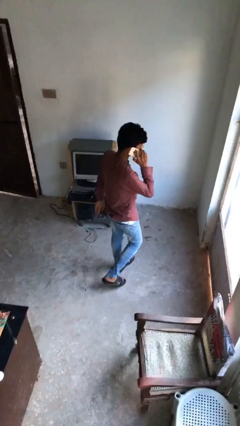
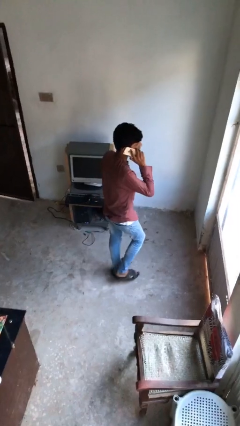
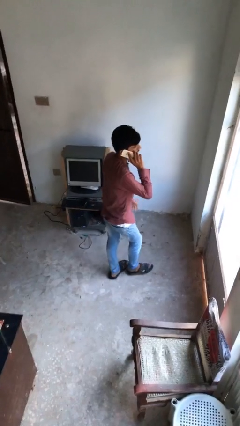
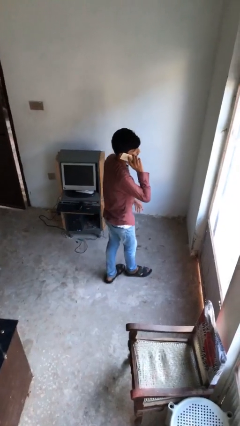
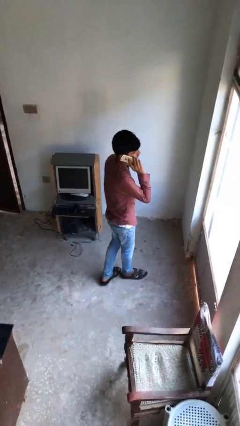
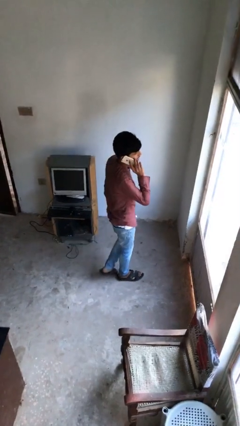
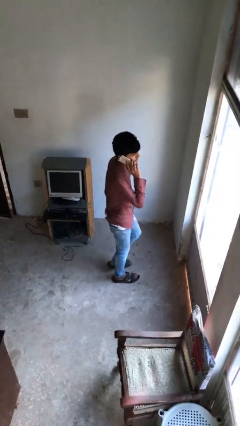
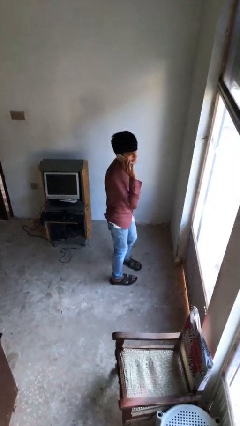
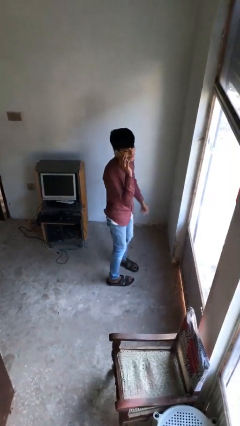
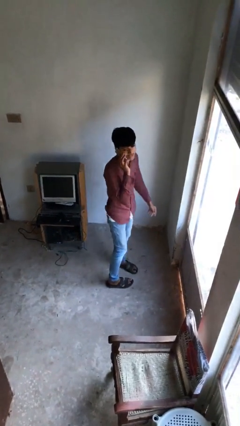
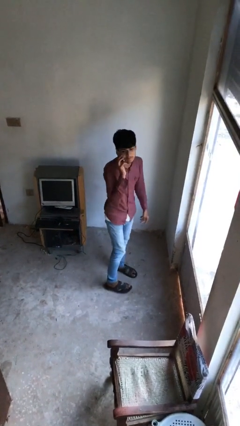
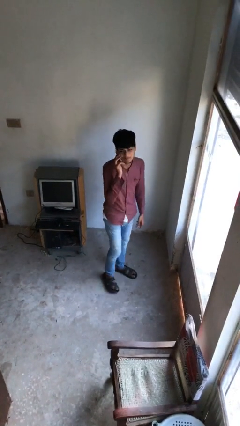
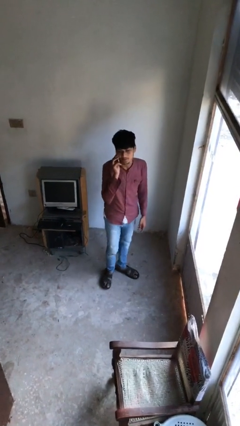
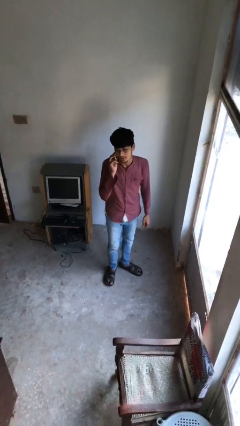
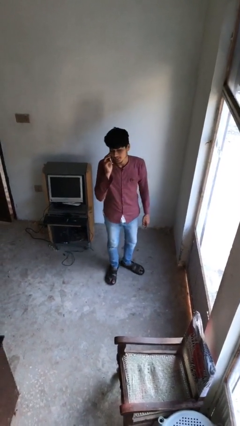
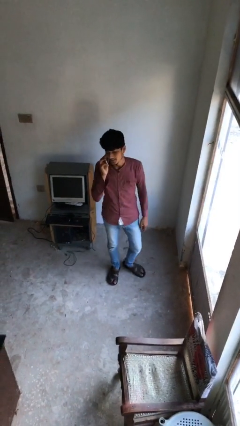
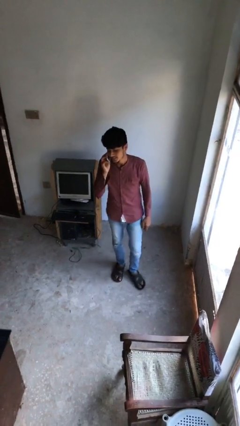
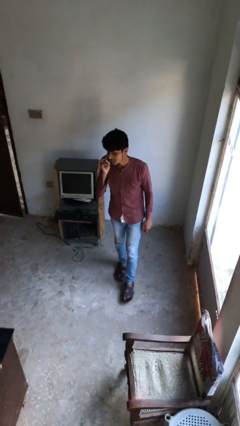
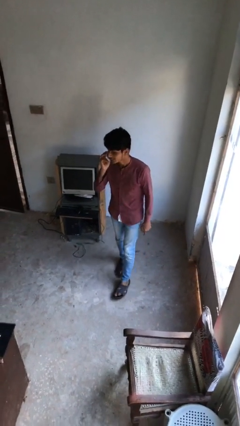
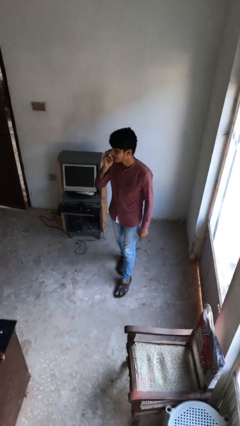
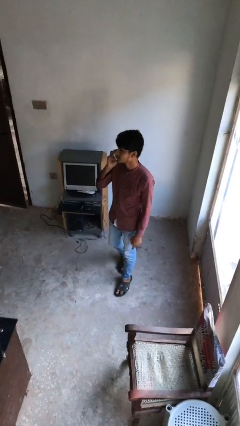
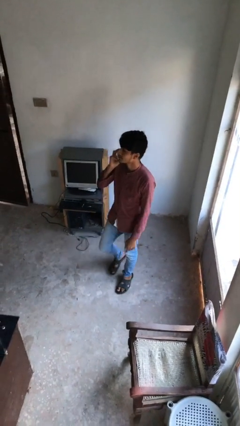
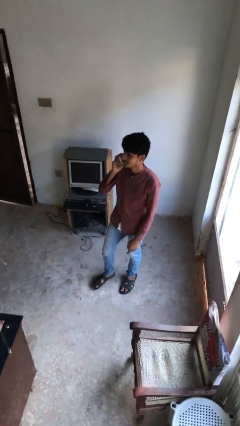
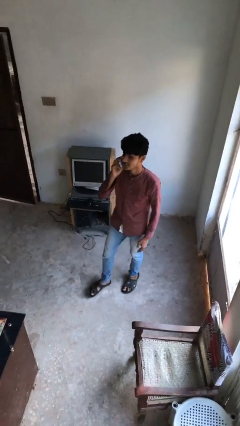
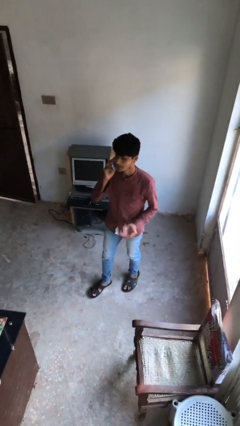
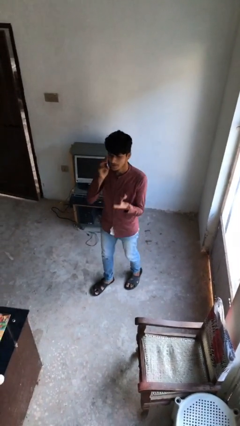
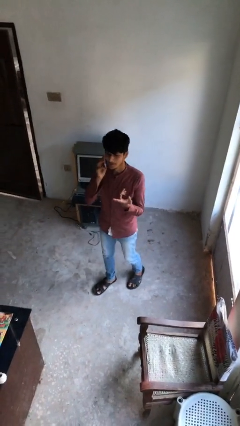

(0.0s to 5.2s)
person talks on phone

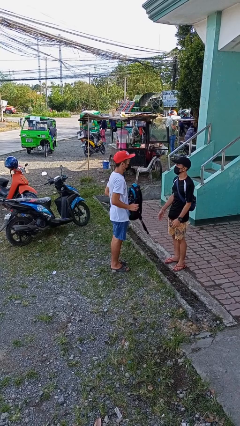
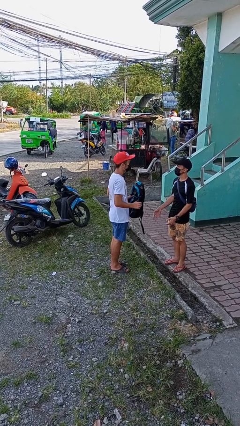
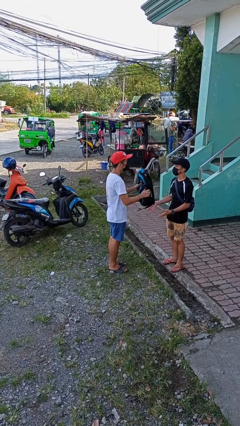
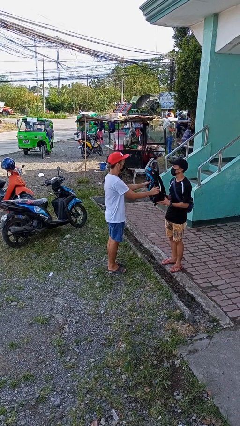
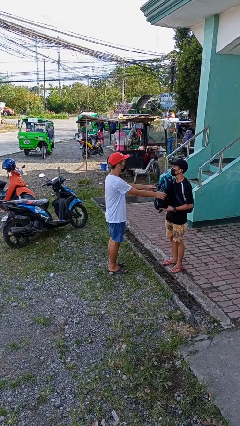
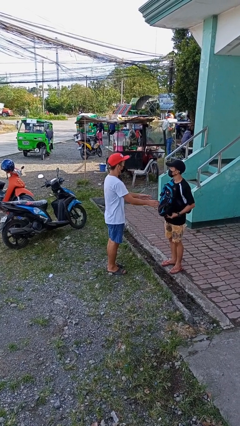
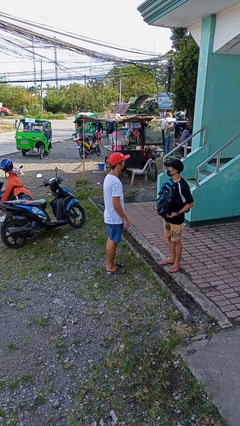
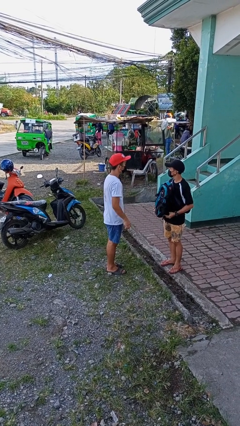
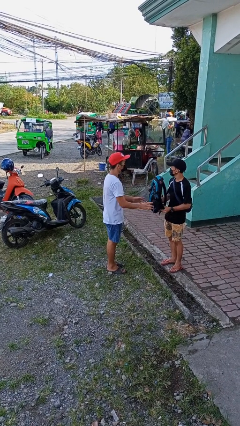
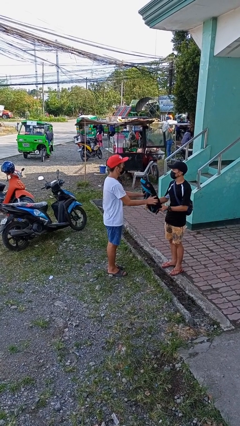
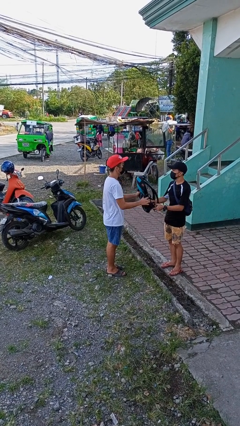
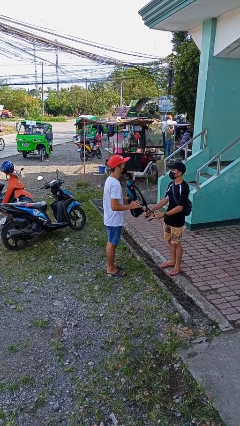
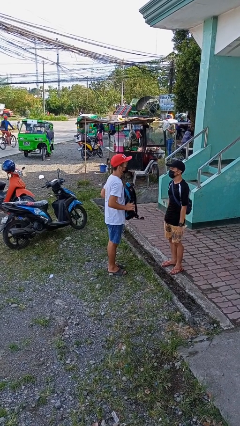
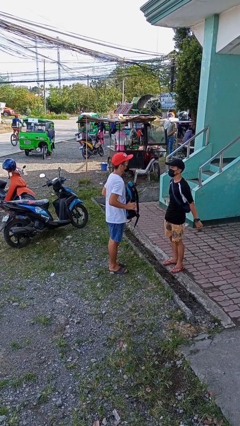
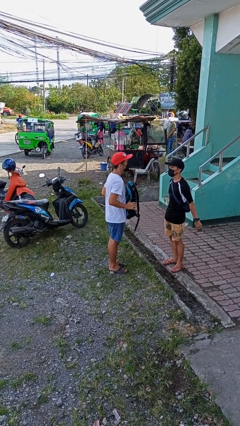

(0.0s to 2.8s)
person transfers object to person

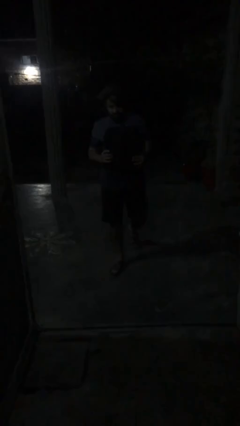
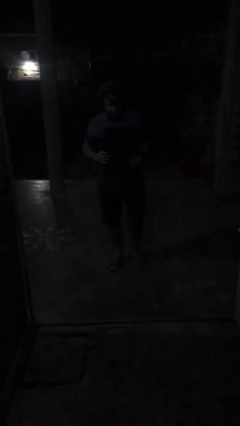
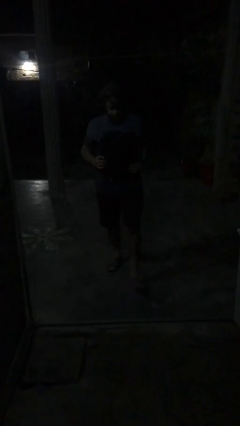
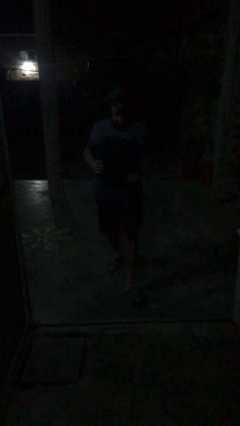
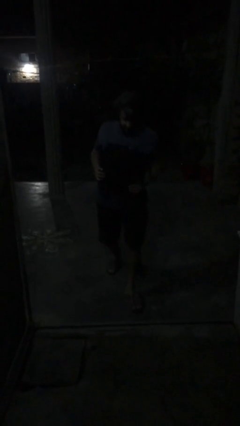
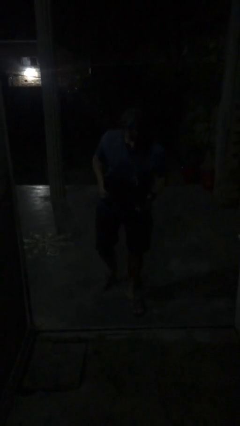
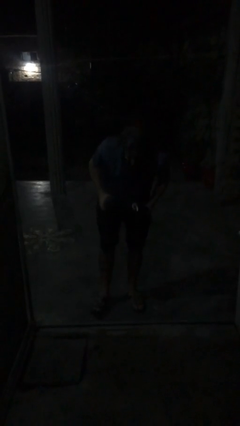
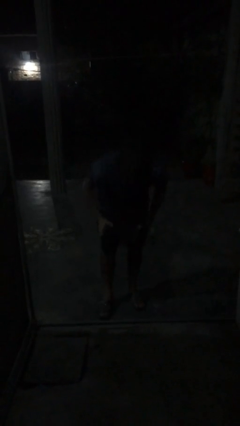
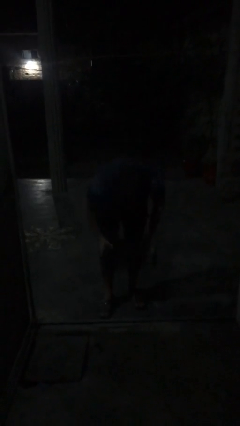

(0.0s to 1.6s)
person puts down object on floor

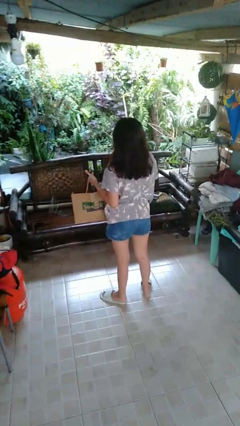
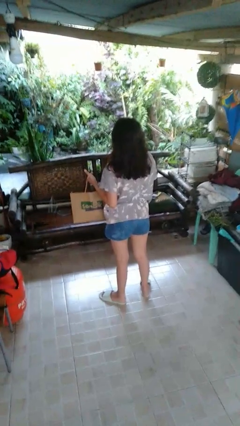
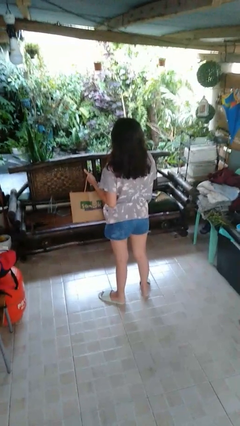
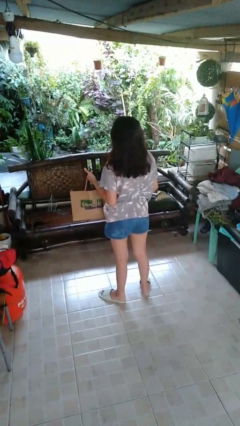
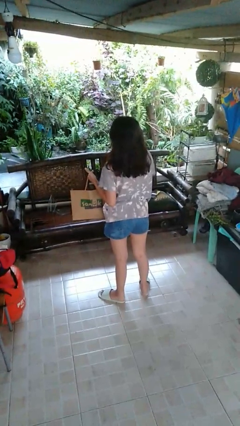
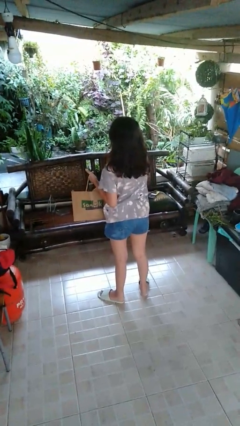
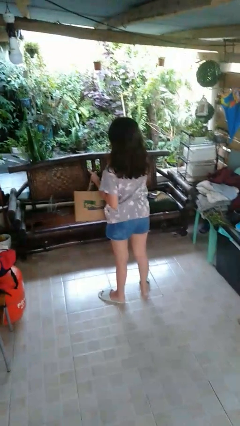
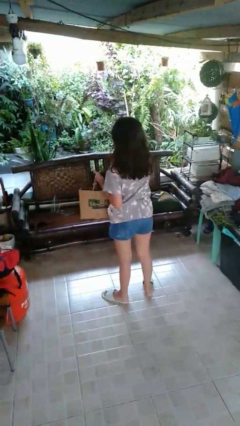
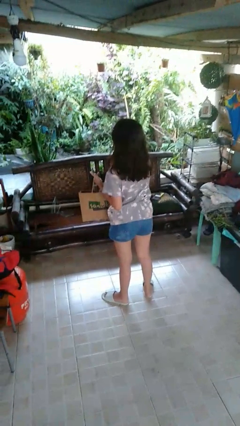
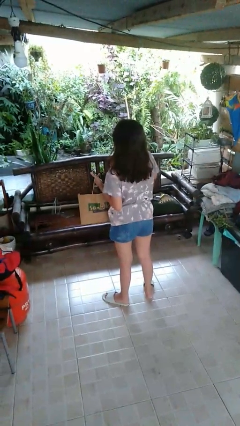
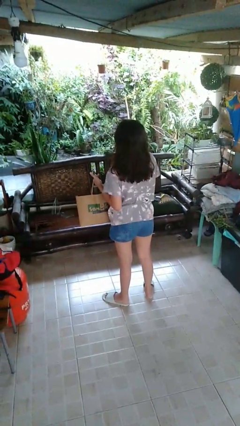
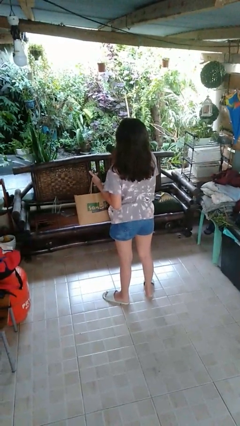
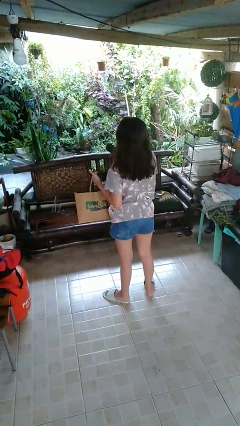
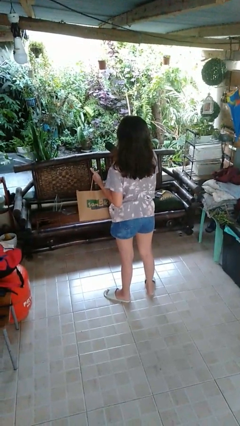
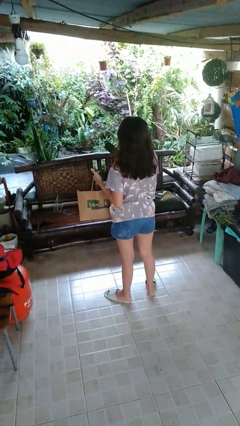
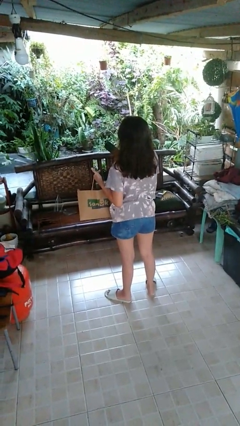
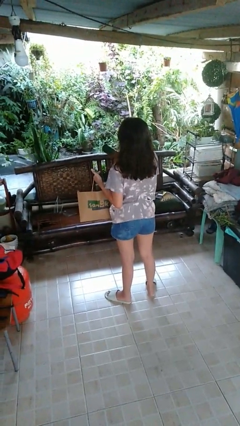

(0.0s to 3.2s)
person takes object from bag

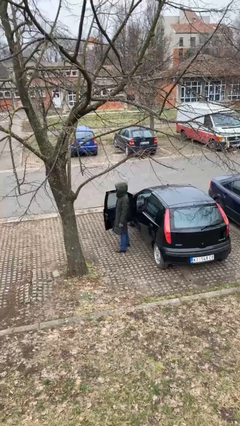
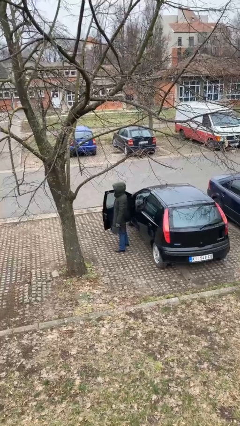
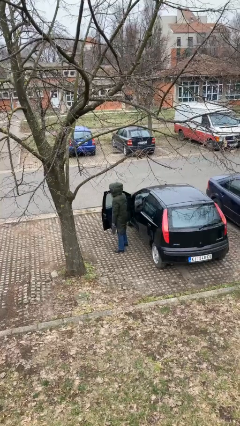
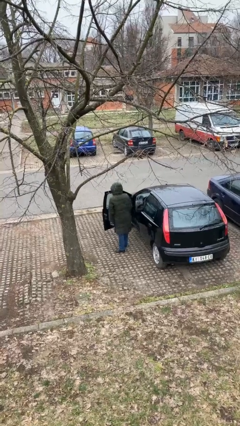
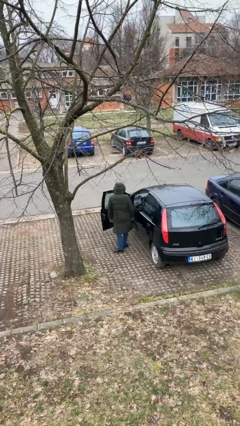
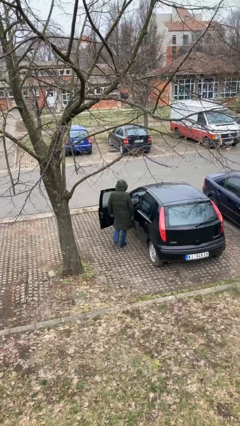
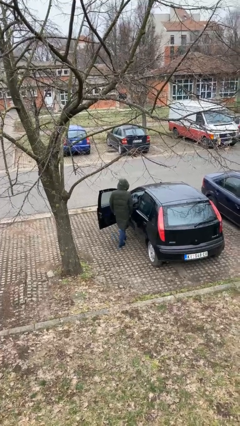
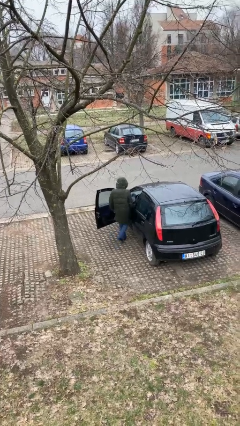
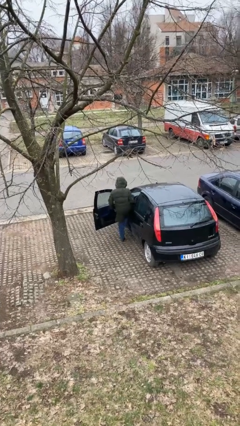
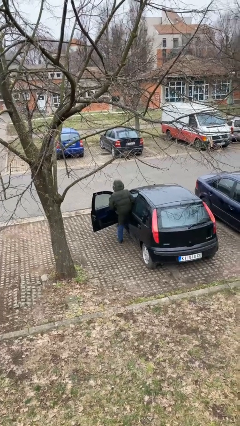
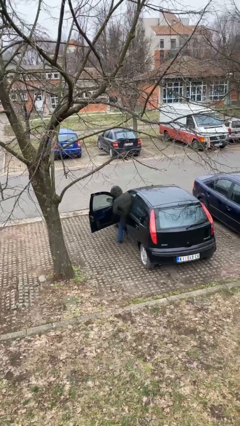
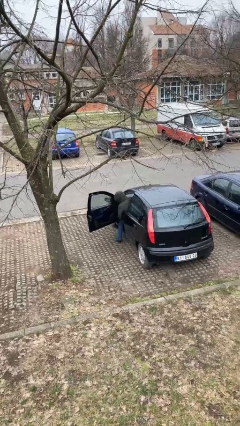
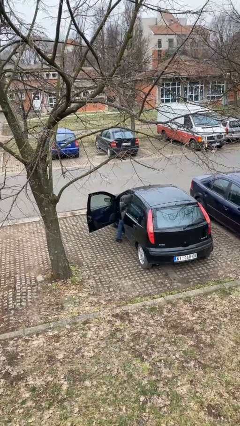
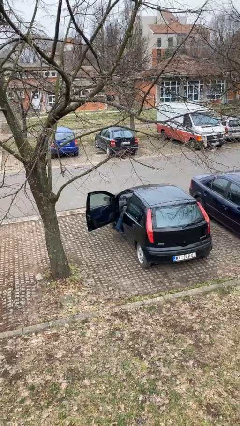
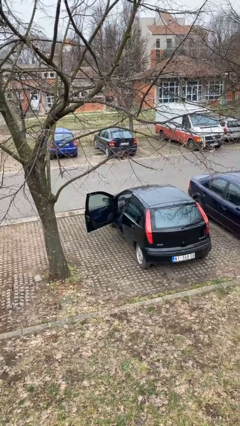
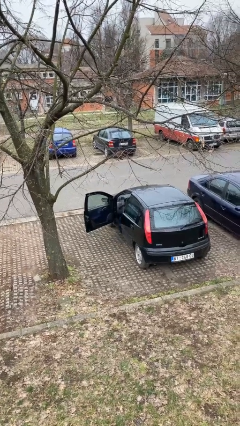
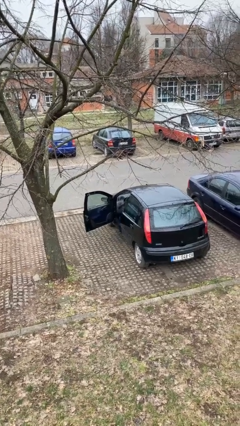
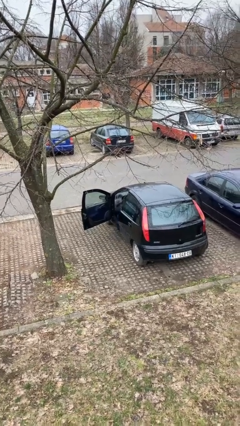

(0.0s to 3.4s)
person enters car

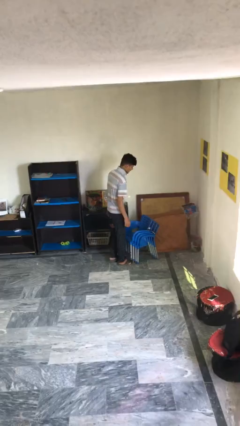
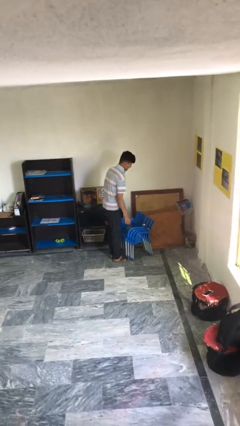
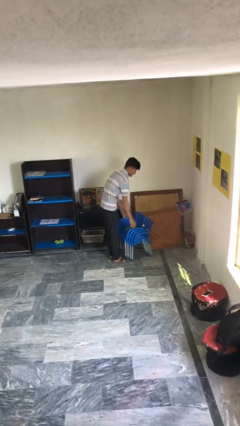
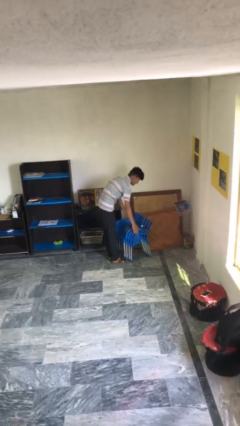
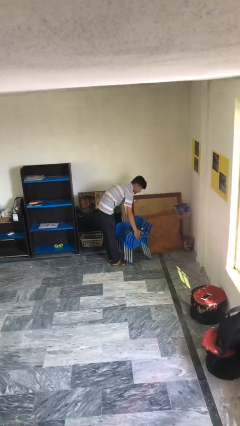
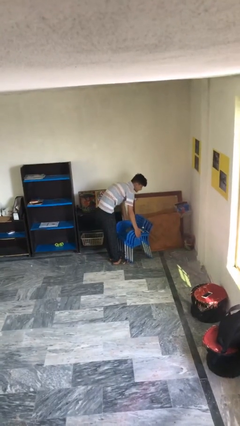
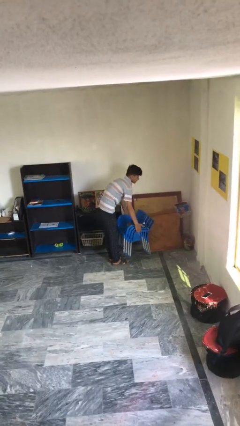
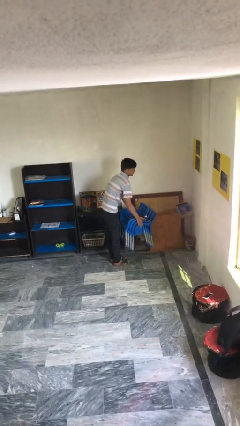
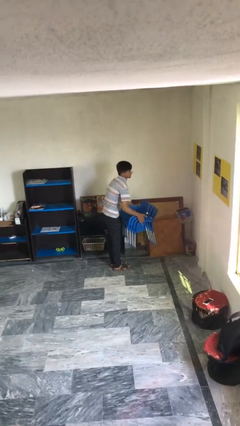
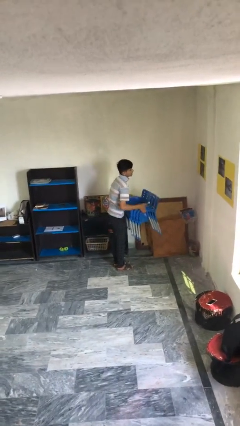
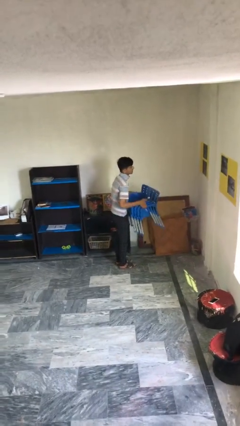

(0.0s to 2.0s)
person picks up object from floor
